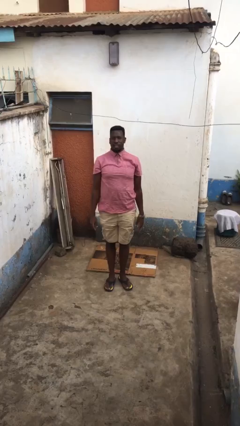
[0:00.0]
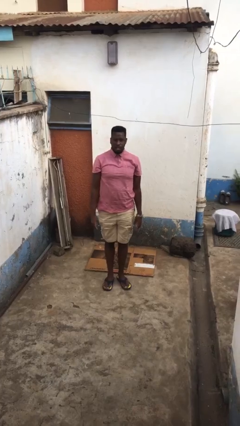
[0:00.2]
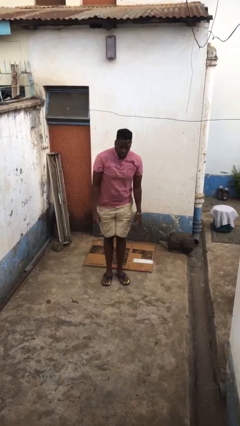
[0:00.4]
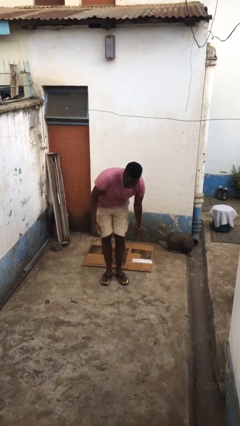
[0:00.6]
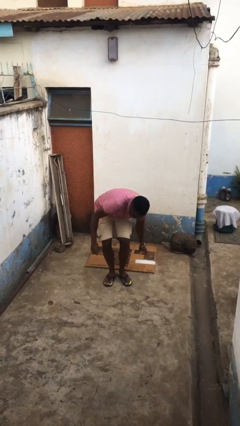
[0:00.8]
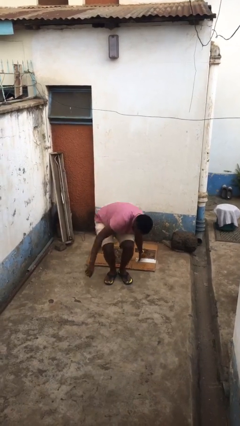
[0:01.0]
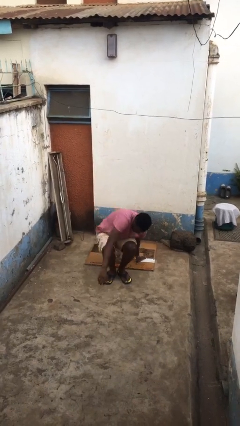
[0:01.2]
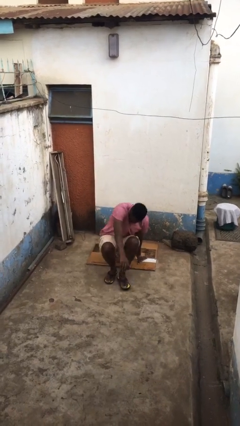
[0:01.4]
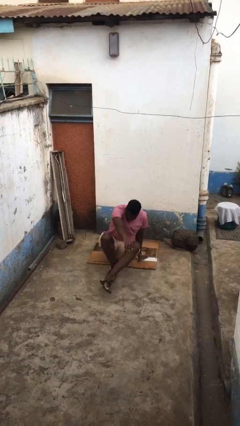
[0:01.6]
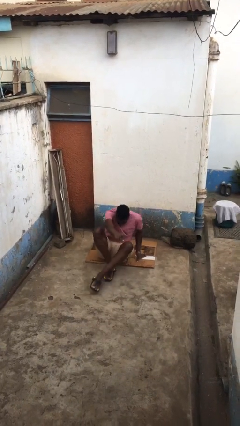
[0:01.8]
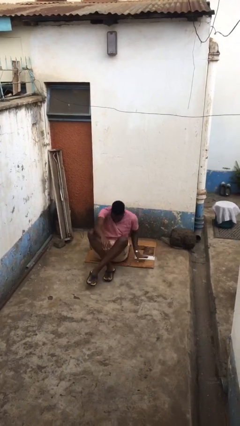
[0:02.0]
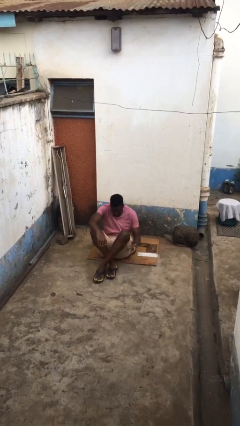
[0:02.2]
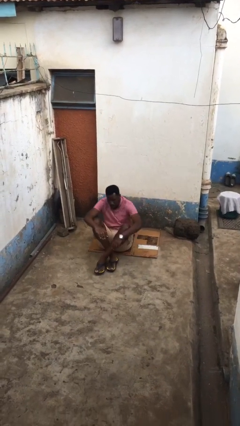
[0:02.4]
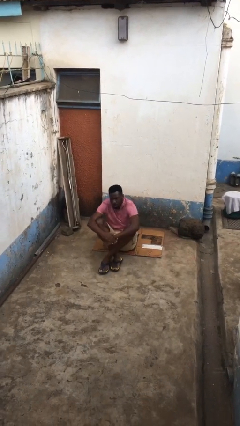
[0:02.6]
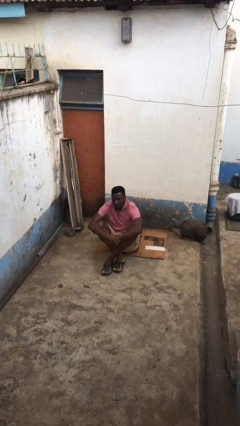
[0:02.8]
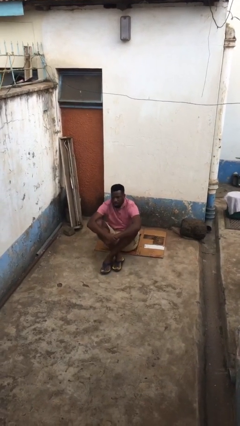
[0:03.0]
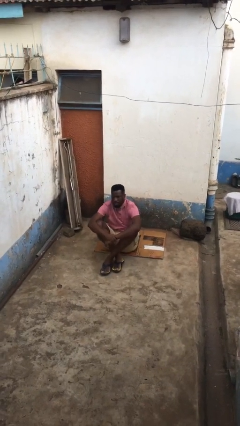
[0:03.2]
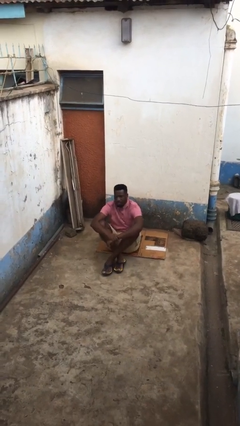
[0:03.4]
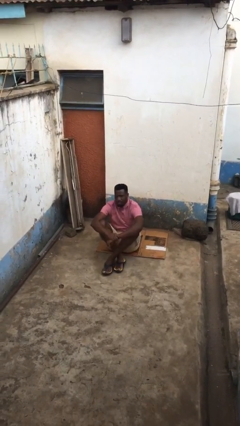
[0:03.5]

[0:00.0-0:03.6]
person sits crisscross

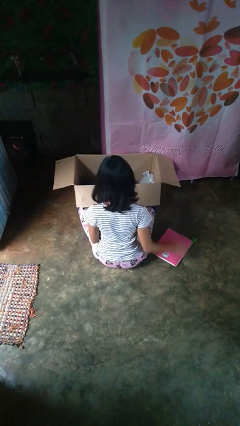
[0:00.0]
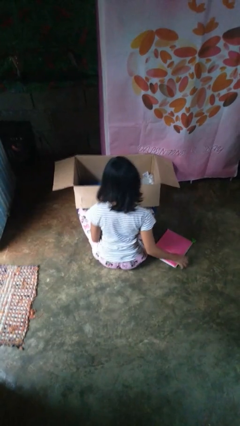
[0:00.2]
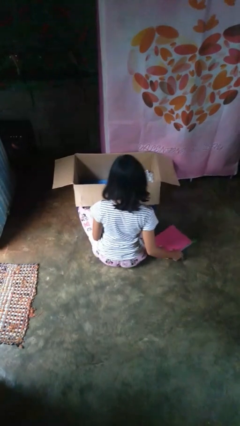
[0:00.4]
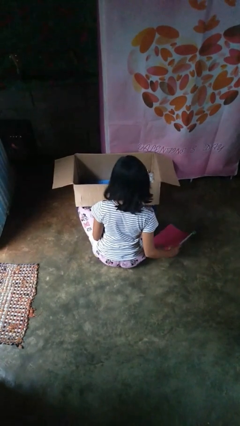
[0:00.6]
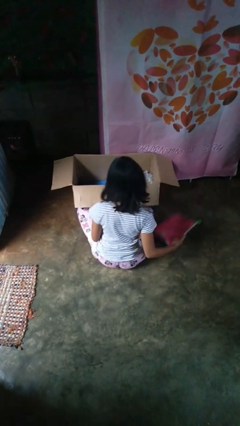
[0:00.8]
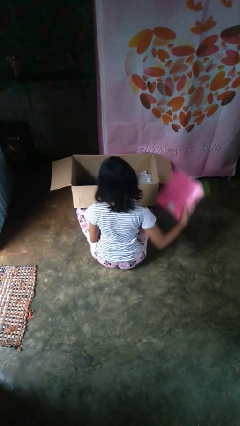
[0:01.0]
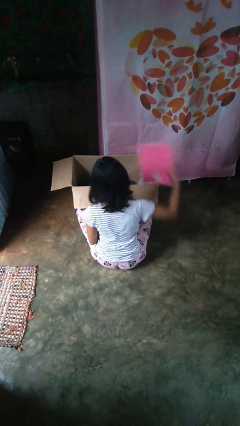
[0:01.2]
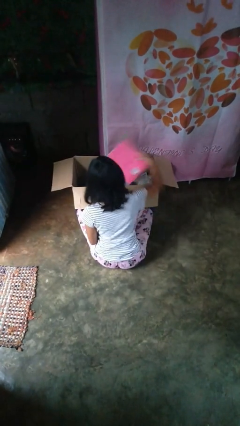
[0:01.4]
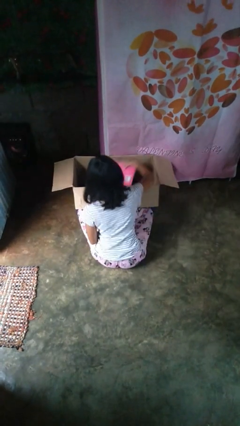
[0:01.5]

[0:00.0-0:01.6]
person puts object into box

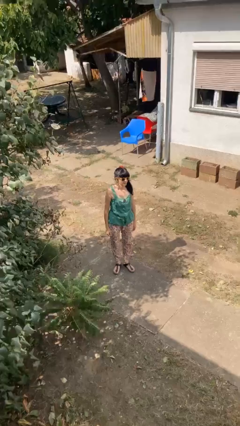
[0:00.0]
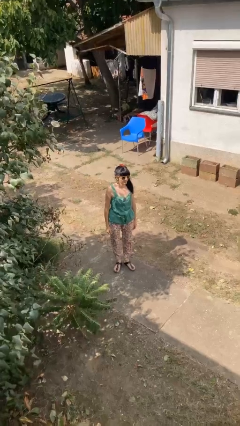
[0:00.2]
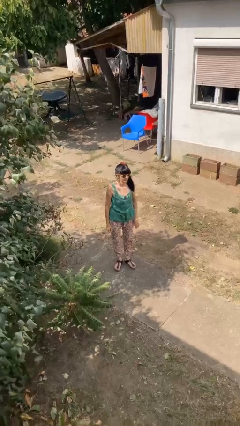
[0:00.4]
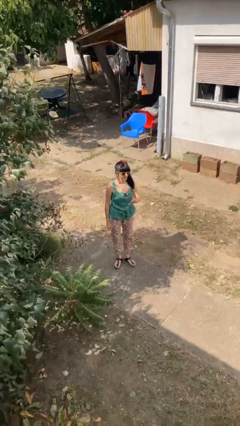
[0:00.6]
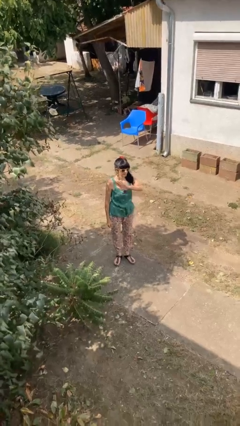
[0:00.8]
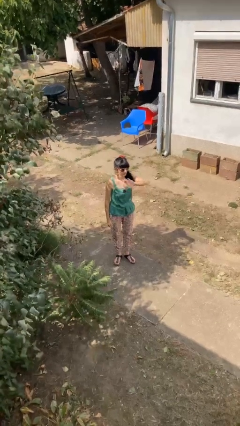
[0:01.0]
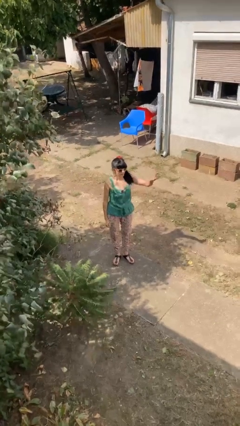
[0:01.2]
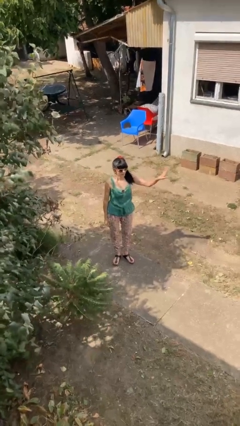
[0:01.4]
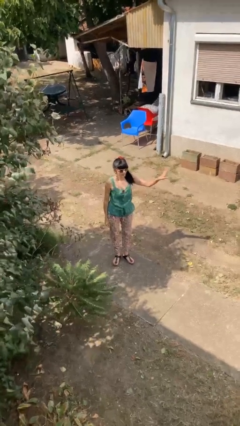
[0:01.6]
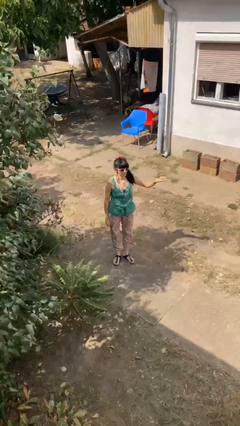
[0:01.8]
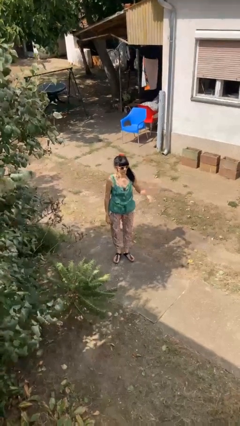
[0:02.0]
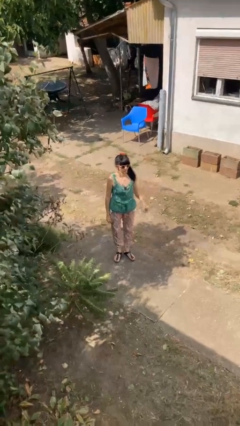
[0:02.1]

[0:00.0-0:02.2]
person gestures swipe left

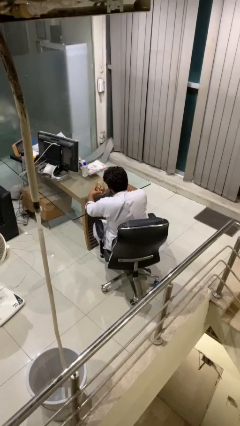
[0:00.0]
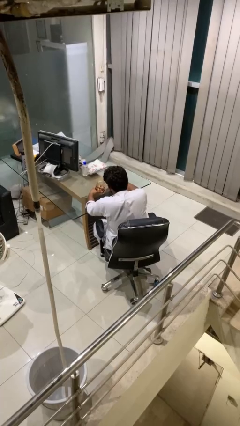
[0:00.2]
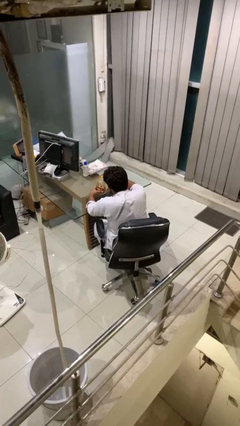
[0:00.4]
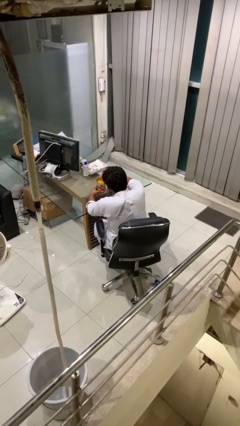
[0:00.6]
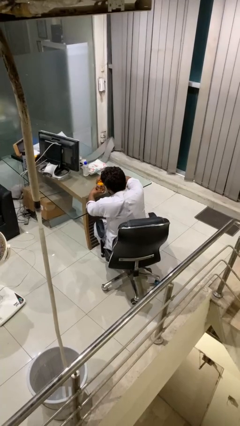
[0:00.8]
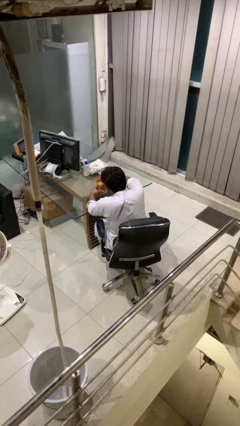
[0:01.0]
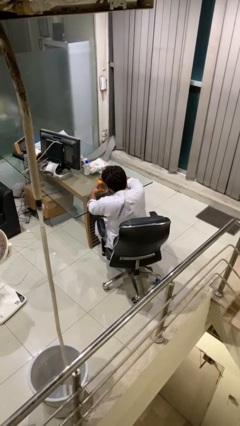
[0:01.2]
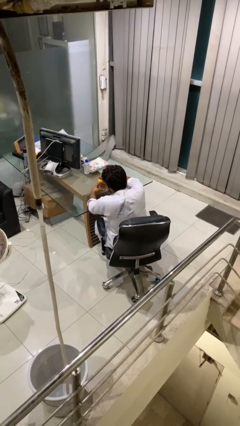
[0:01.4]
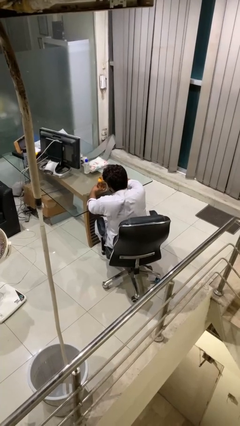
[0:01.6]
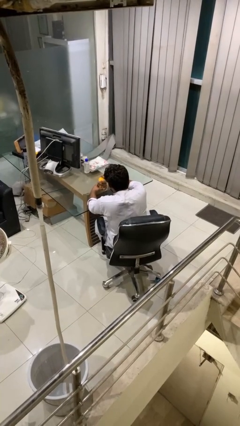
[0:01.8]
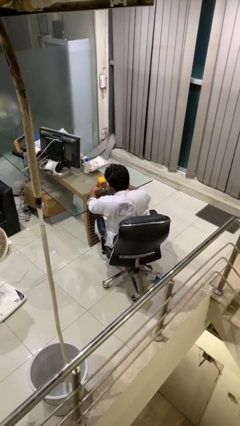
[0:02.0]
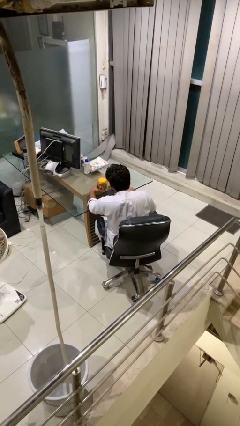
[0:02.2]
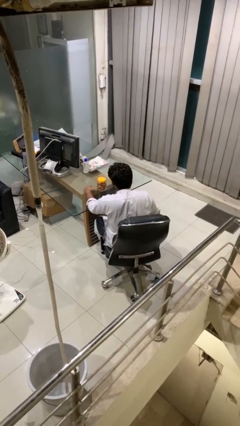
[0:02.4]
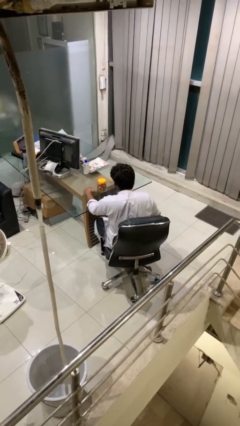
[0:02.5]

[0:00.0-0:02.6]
person closes jar

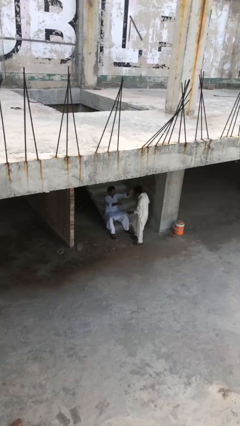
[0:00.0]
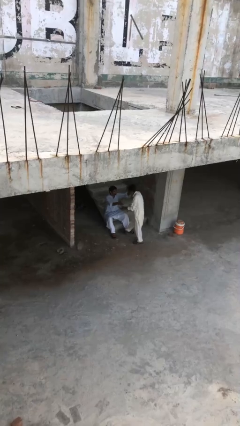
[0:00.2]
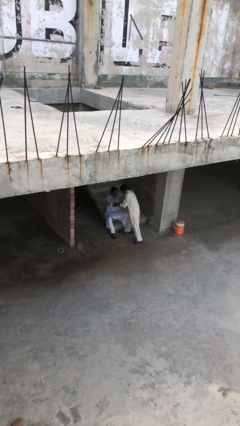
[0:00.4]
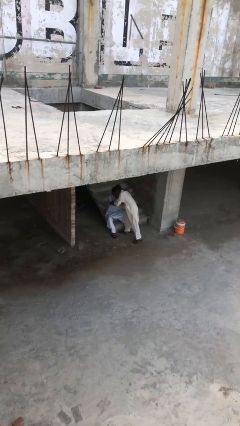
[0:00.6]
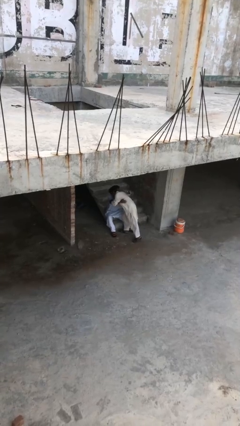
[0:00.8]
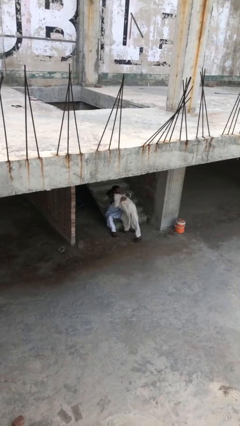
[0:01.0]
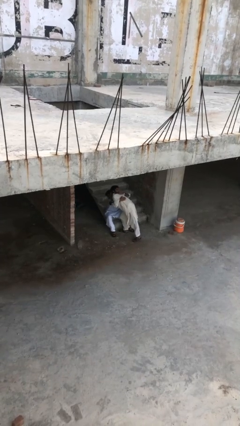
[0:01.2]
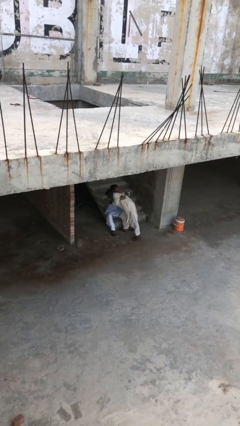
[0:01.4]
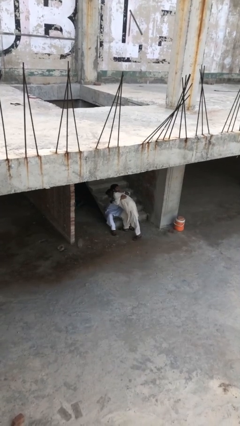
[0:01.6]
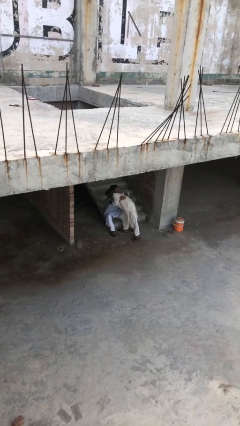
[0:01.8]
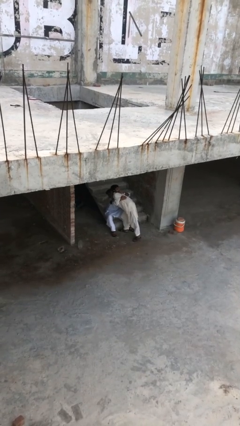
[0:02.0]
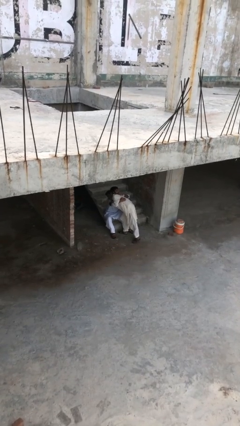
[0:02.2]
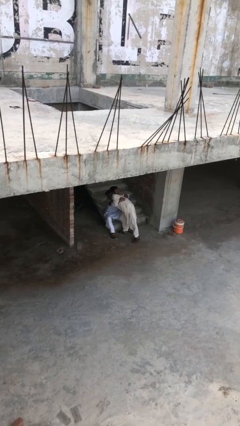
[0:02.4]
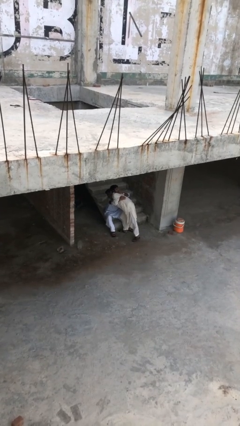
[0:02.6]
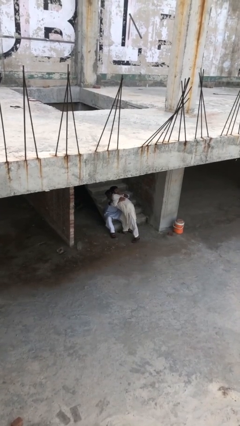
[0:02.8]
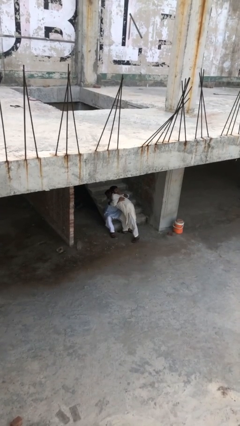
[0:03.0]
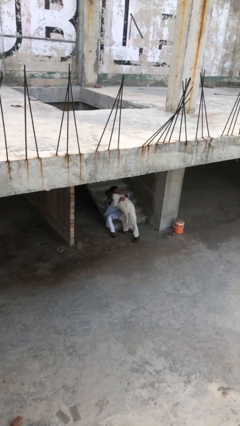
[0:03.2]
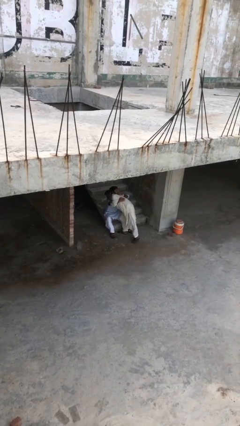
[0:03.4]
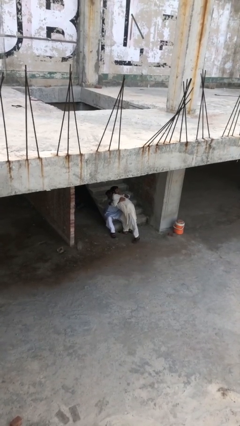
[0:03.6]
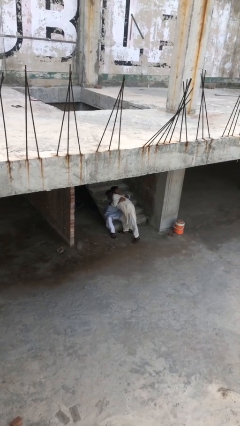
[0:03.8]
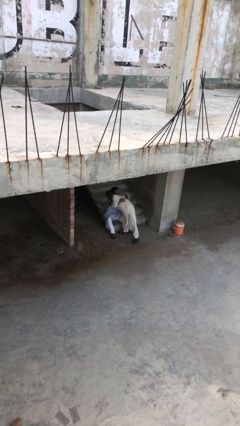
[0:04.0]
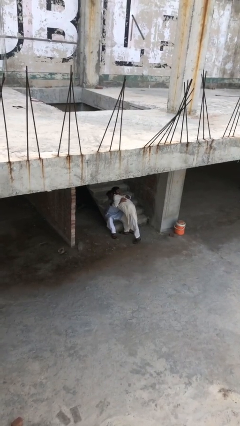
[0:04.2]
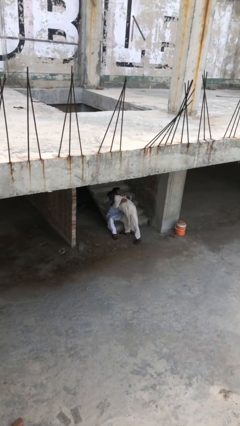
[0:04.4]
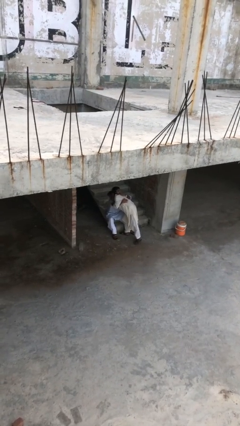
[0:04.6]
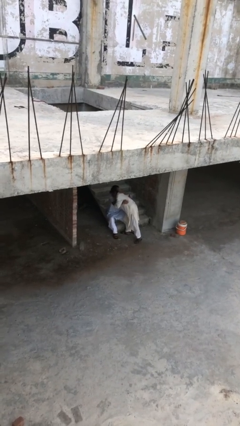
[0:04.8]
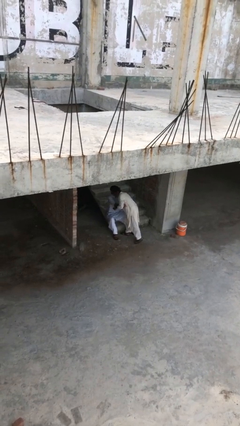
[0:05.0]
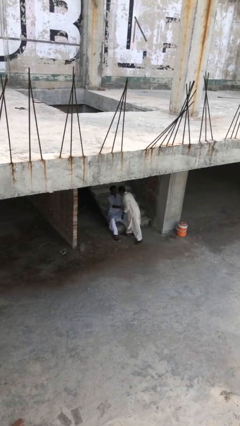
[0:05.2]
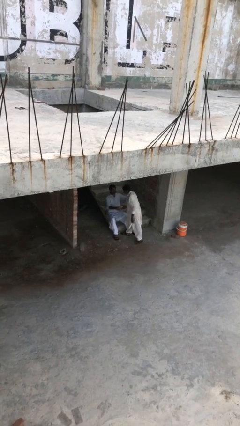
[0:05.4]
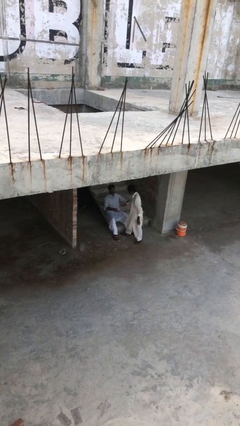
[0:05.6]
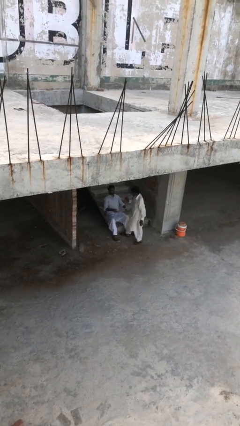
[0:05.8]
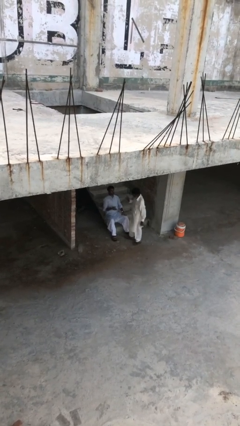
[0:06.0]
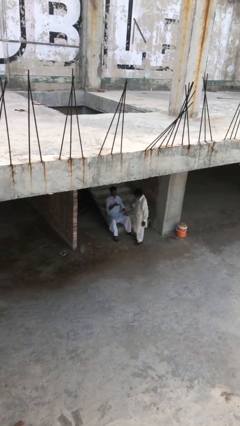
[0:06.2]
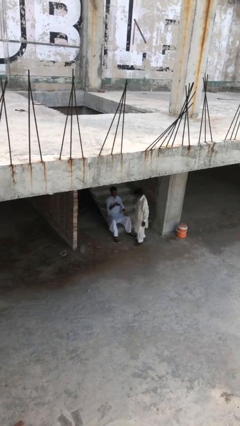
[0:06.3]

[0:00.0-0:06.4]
person embraces person

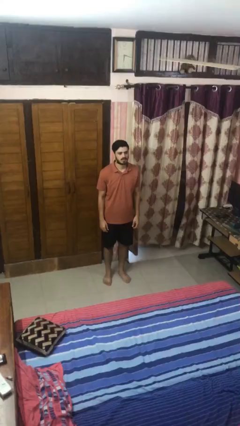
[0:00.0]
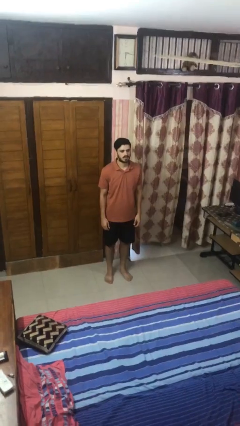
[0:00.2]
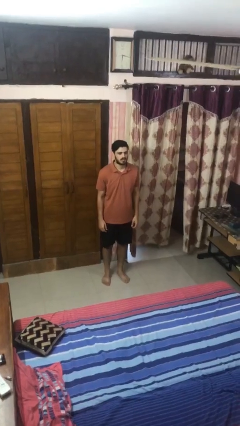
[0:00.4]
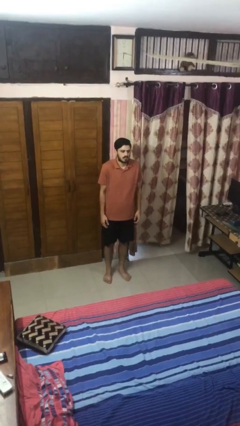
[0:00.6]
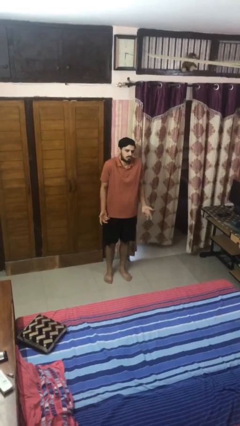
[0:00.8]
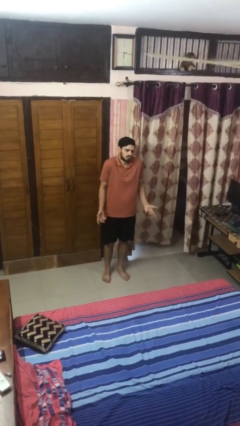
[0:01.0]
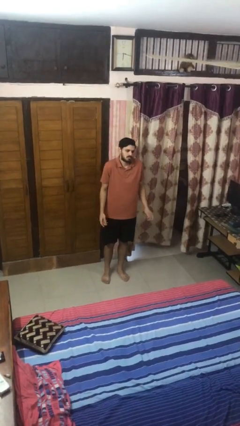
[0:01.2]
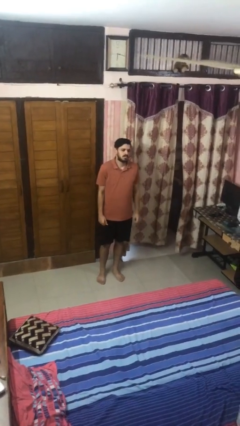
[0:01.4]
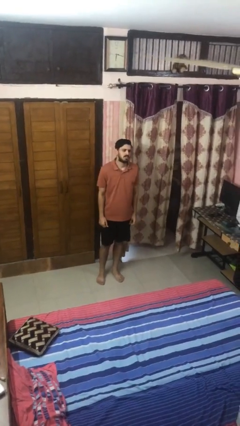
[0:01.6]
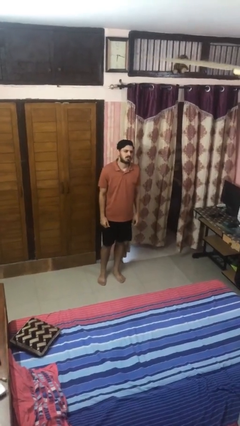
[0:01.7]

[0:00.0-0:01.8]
person shrugs
